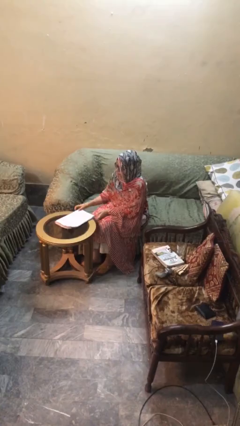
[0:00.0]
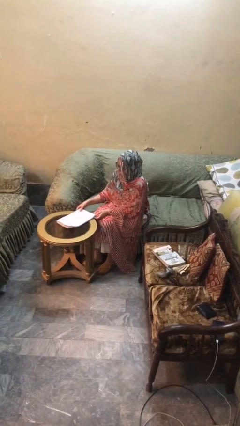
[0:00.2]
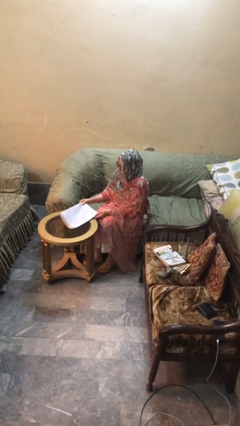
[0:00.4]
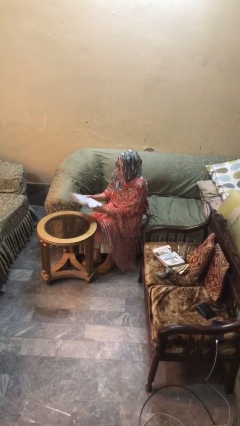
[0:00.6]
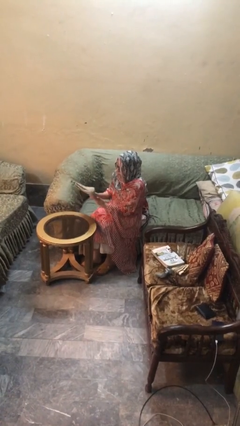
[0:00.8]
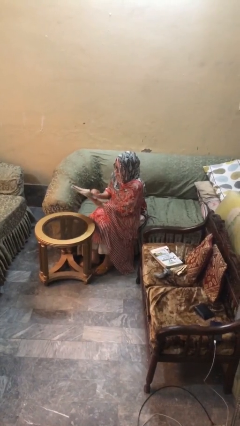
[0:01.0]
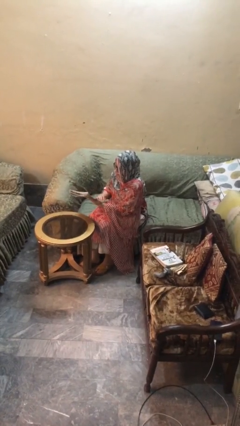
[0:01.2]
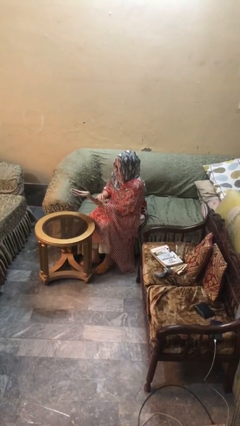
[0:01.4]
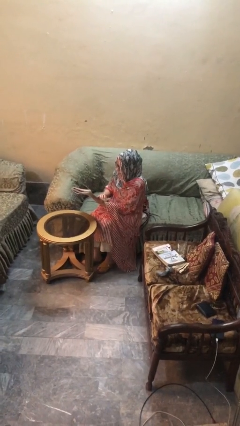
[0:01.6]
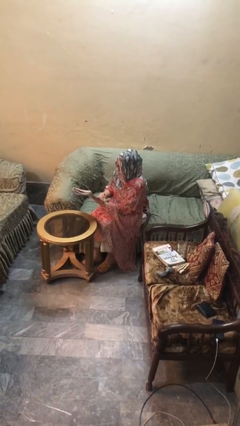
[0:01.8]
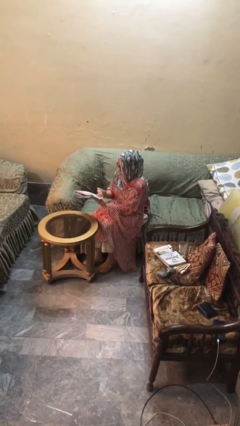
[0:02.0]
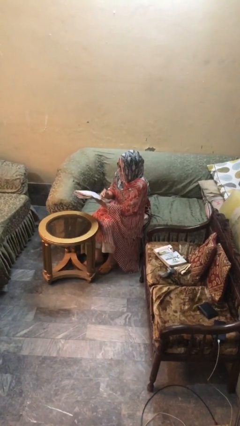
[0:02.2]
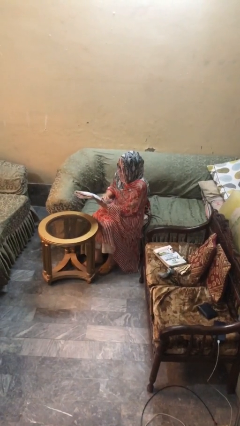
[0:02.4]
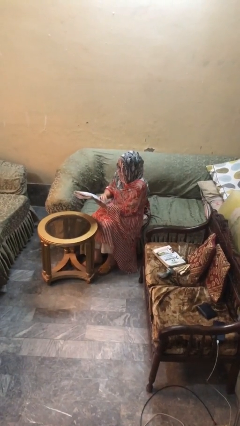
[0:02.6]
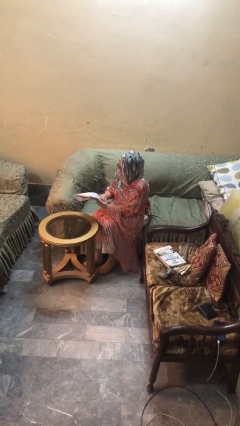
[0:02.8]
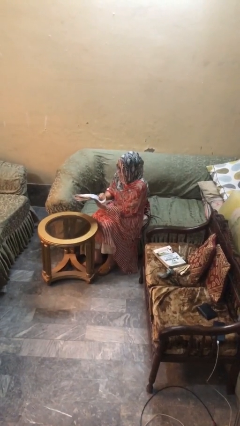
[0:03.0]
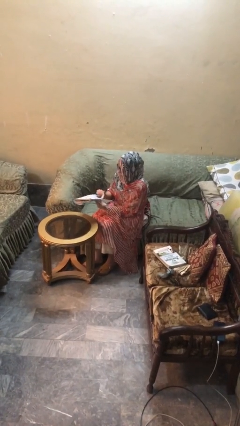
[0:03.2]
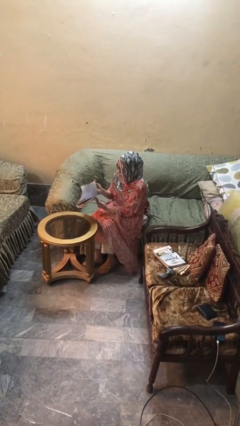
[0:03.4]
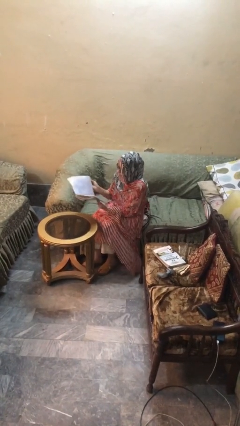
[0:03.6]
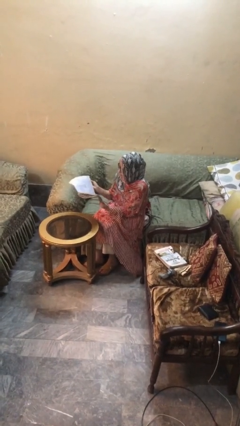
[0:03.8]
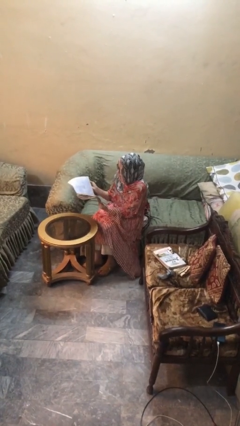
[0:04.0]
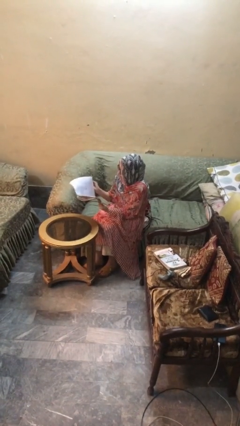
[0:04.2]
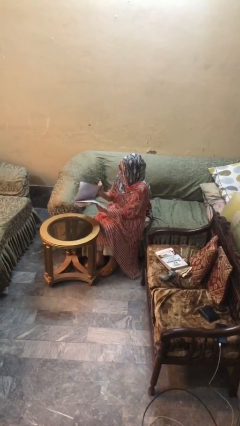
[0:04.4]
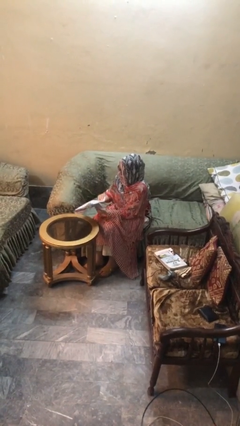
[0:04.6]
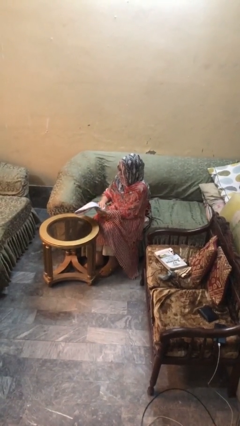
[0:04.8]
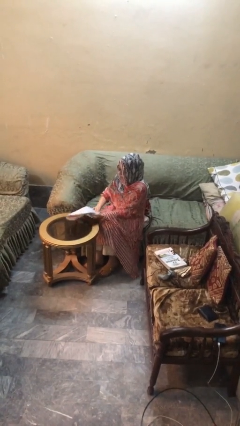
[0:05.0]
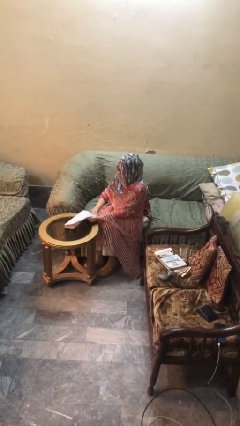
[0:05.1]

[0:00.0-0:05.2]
person reads magazine

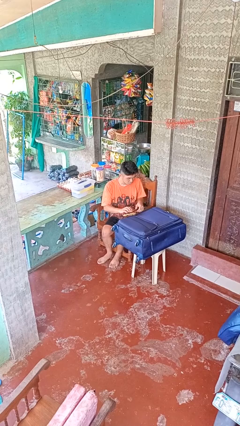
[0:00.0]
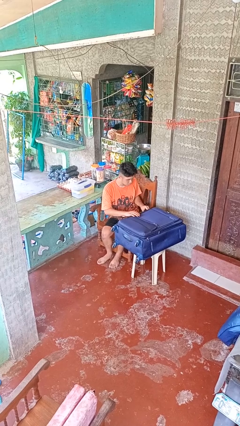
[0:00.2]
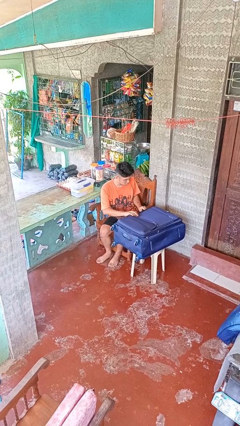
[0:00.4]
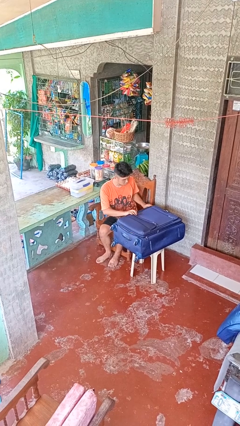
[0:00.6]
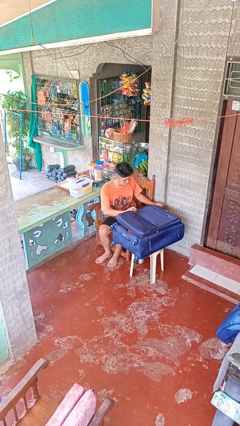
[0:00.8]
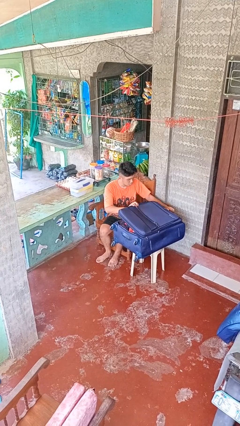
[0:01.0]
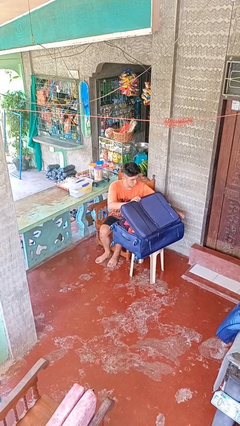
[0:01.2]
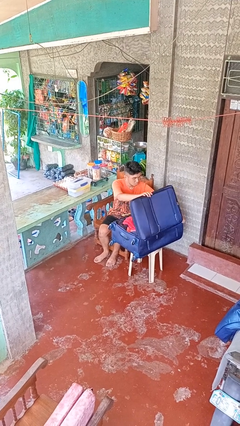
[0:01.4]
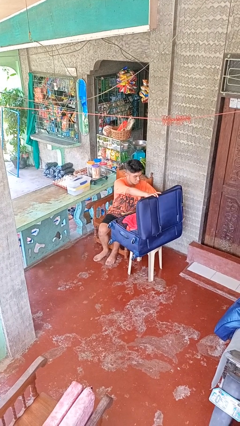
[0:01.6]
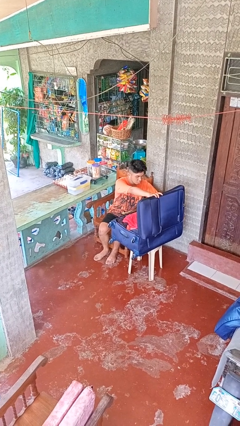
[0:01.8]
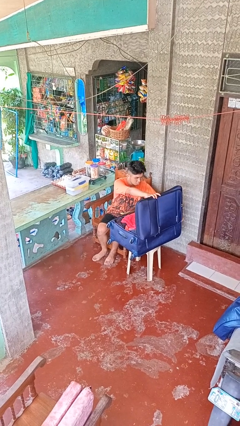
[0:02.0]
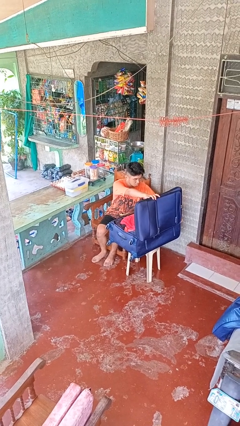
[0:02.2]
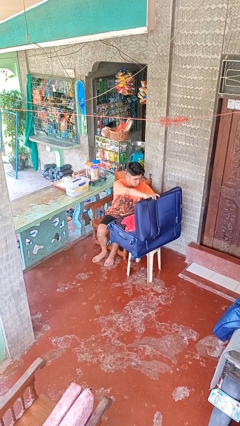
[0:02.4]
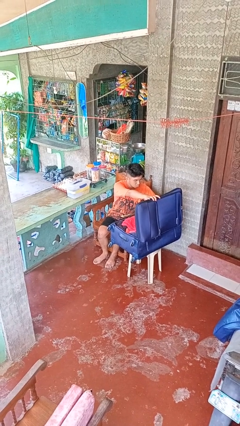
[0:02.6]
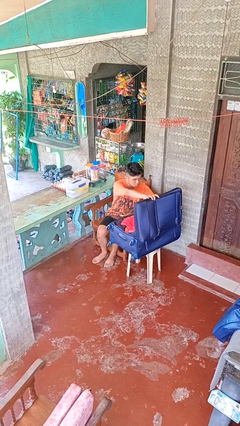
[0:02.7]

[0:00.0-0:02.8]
person opens suitcase

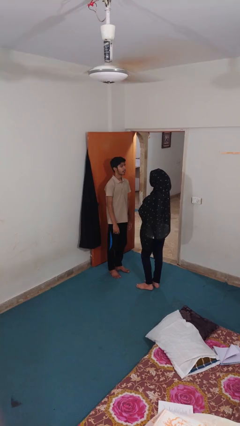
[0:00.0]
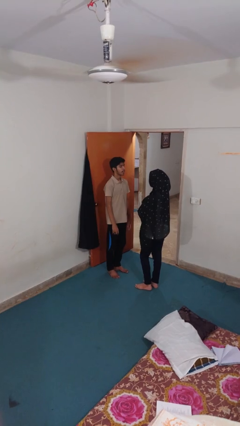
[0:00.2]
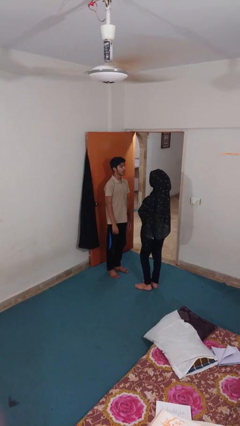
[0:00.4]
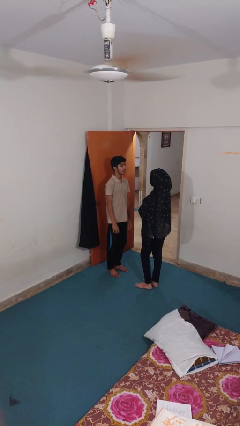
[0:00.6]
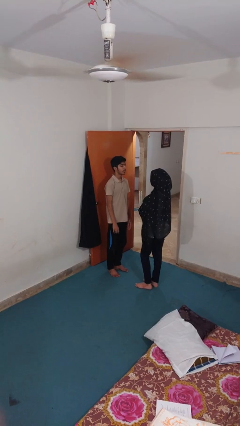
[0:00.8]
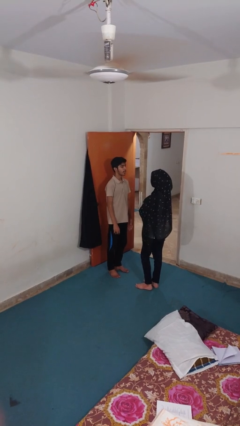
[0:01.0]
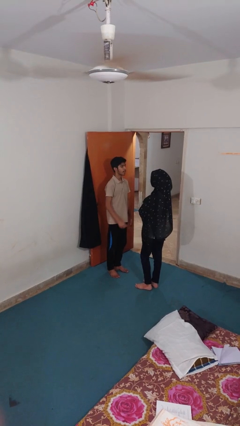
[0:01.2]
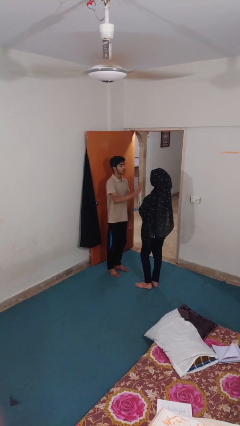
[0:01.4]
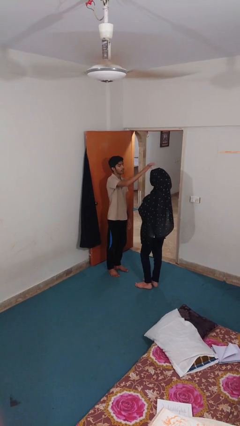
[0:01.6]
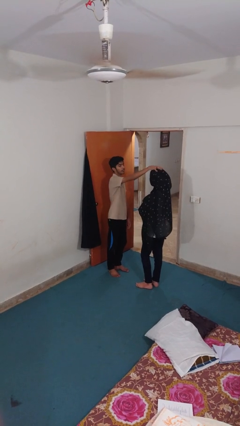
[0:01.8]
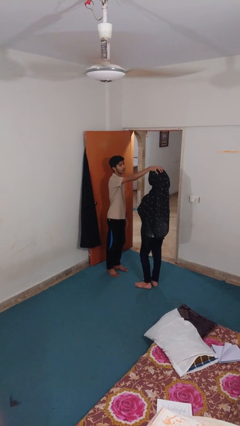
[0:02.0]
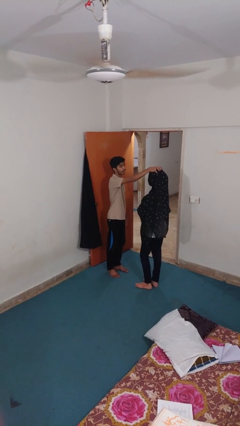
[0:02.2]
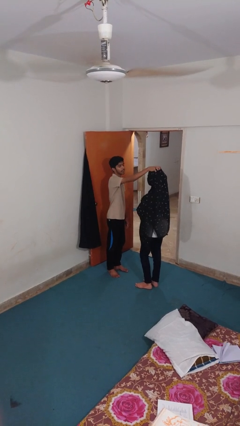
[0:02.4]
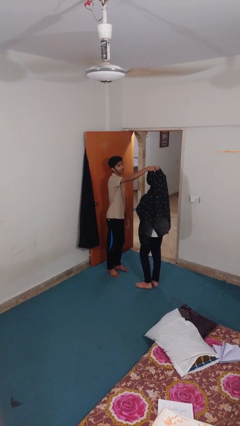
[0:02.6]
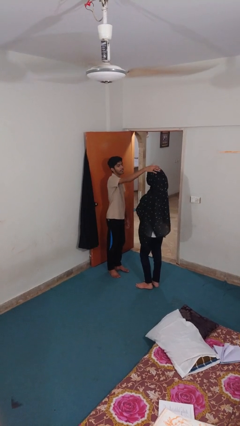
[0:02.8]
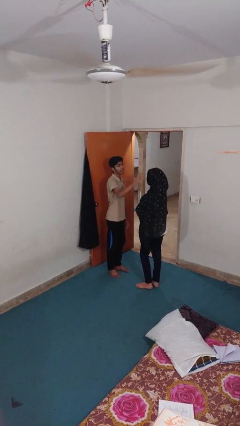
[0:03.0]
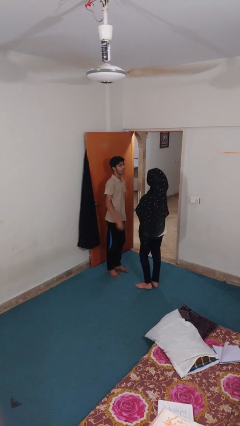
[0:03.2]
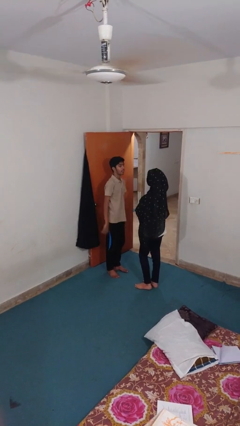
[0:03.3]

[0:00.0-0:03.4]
person grabs person by hair

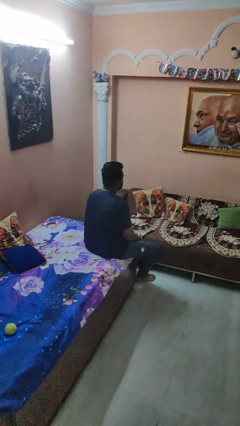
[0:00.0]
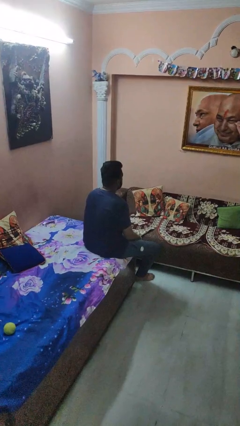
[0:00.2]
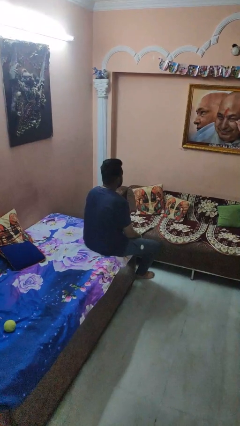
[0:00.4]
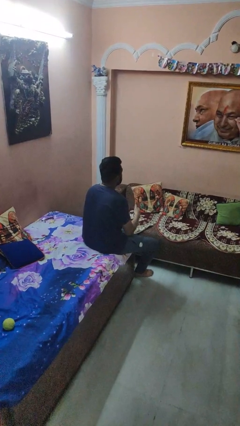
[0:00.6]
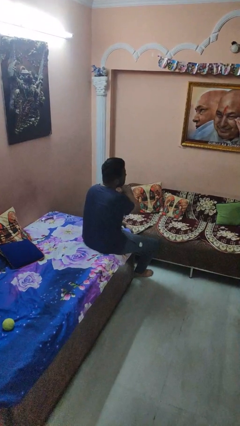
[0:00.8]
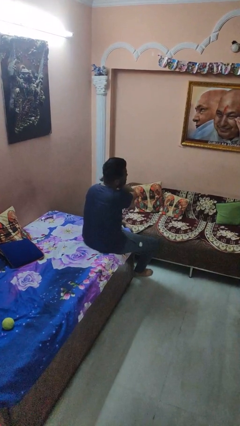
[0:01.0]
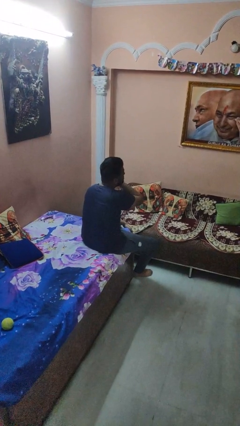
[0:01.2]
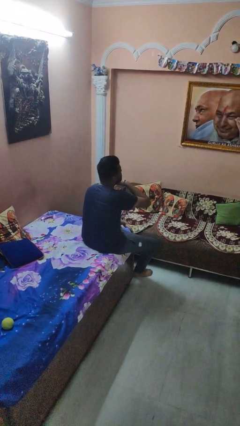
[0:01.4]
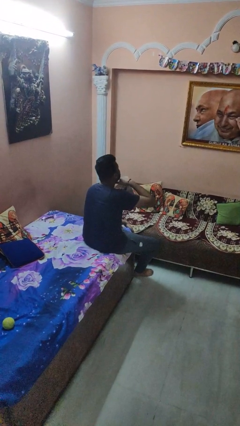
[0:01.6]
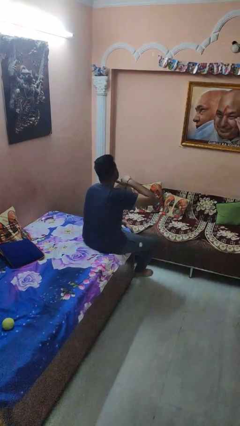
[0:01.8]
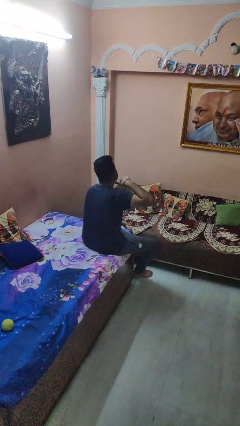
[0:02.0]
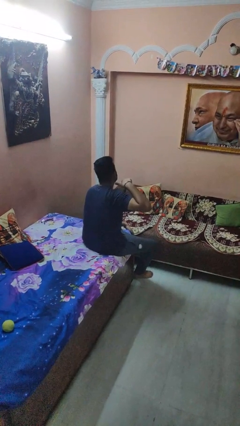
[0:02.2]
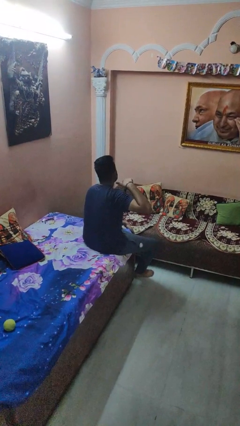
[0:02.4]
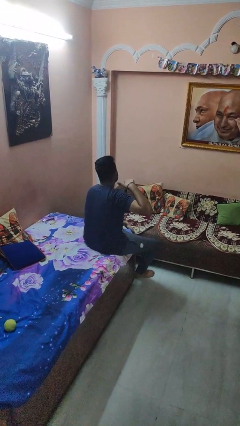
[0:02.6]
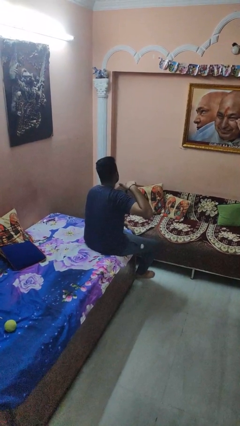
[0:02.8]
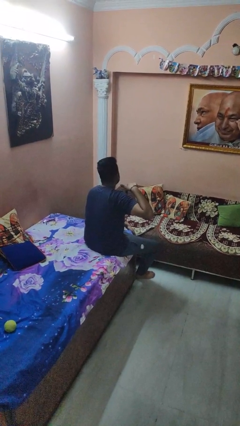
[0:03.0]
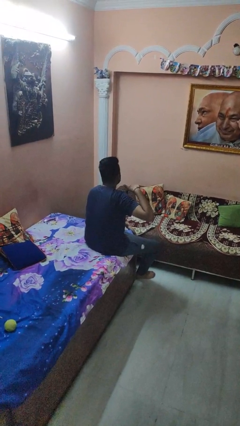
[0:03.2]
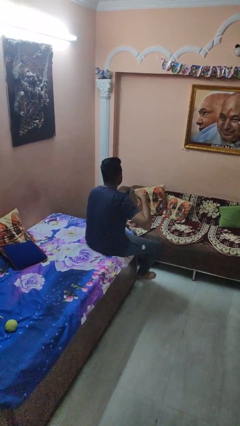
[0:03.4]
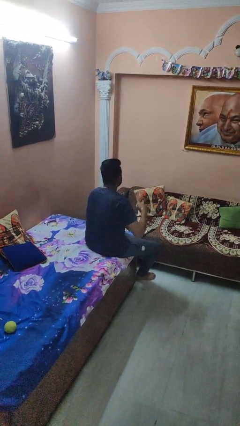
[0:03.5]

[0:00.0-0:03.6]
person gestures cut

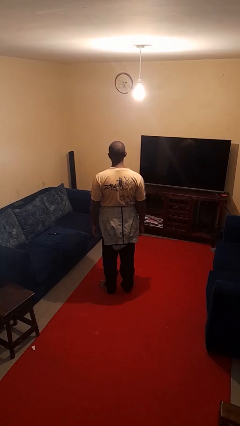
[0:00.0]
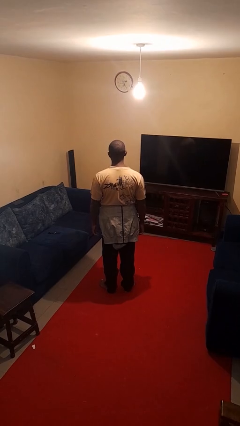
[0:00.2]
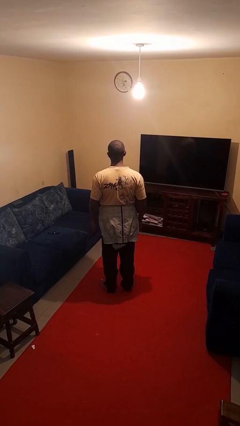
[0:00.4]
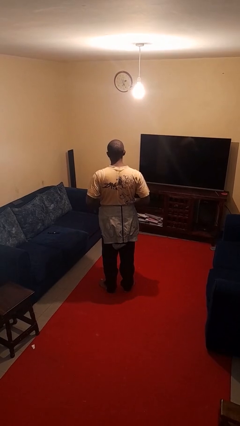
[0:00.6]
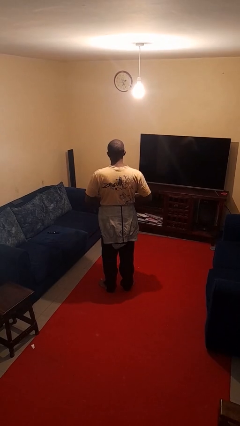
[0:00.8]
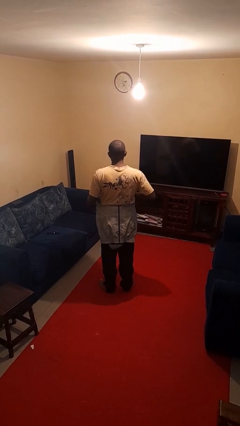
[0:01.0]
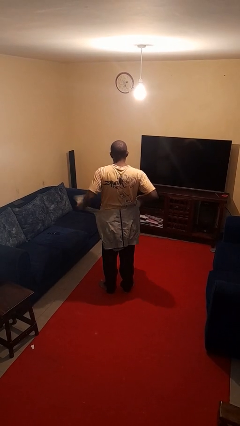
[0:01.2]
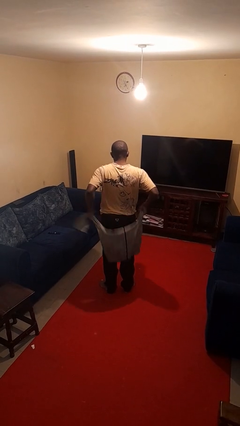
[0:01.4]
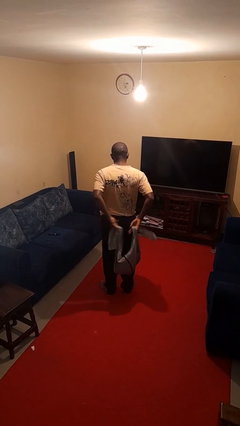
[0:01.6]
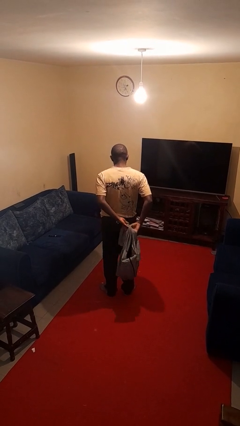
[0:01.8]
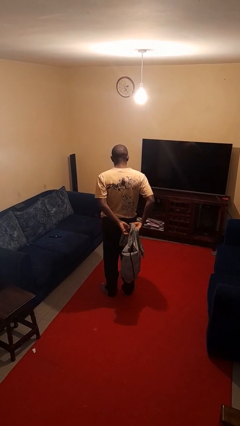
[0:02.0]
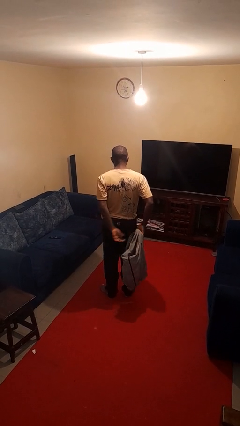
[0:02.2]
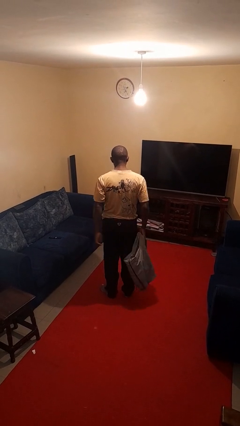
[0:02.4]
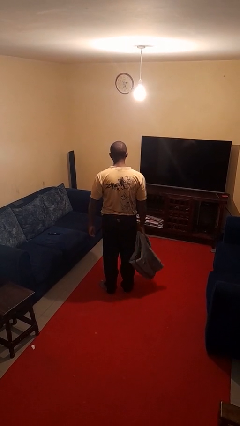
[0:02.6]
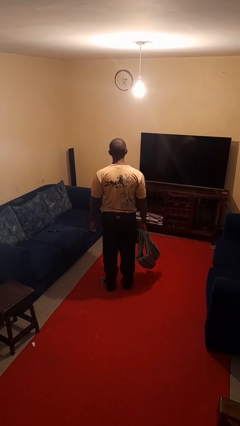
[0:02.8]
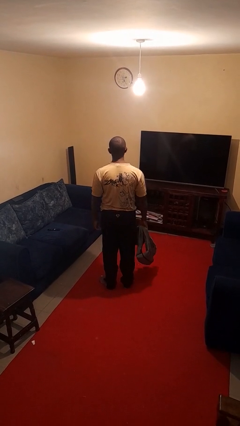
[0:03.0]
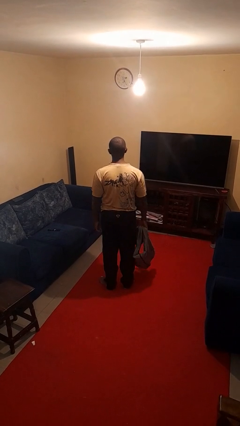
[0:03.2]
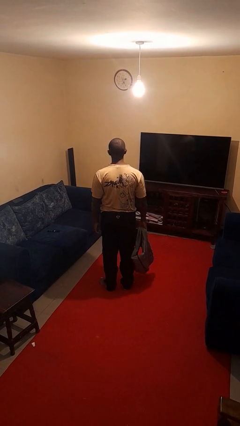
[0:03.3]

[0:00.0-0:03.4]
person unties jacket around waist
